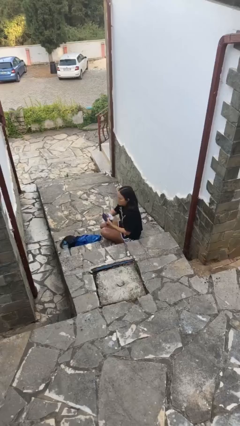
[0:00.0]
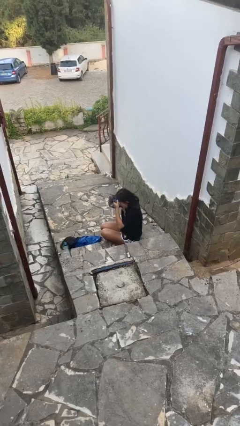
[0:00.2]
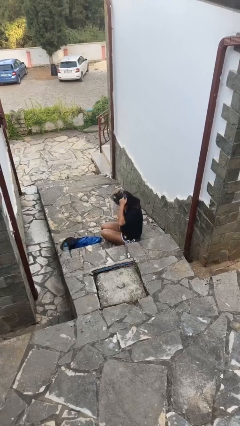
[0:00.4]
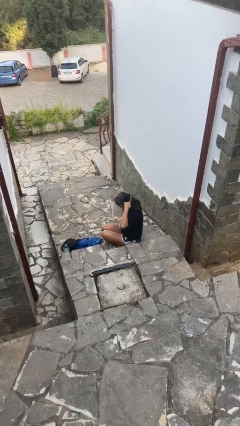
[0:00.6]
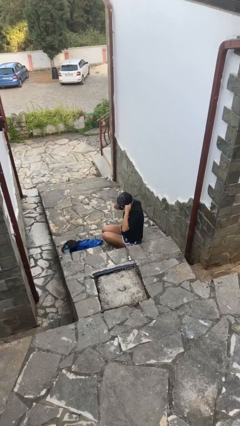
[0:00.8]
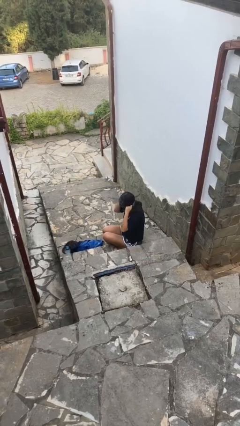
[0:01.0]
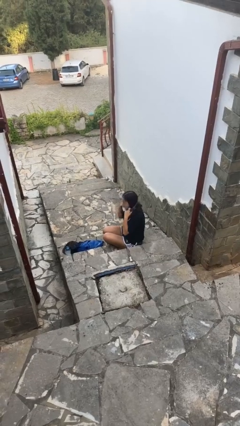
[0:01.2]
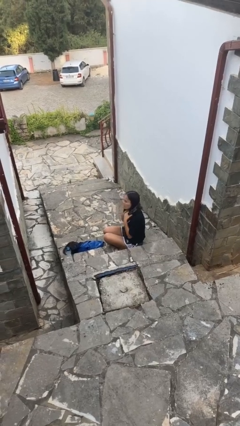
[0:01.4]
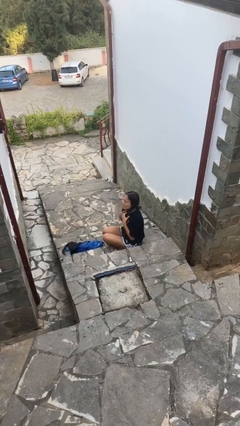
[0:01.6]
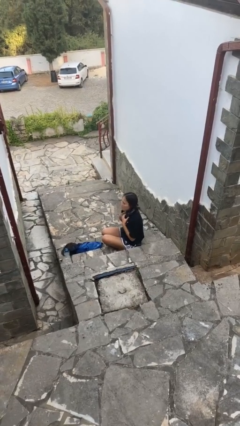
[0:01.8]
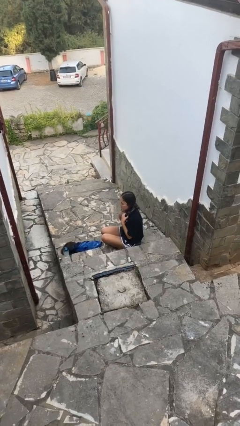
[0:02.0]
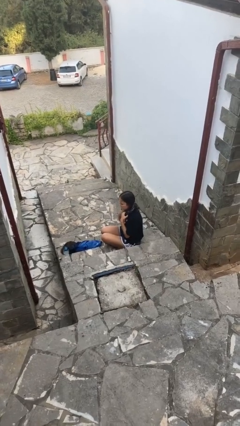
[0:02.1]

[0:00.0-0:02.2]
person puts on scarf

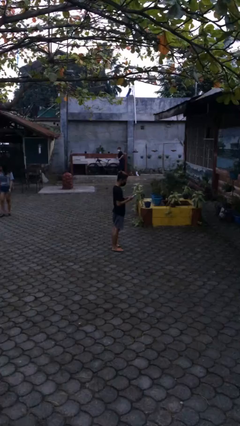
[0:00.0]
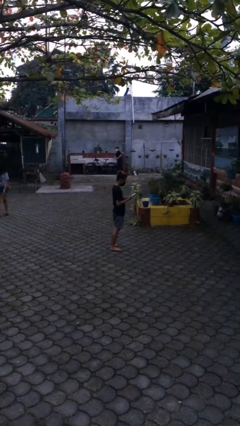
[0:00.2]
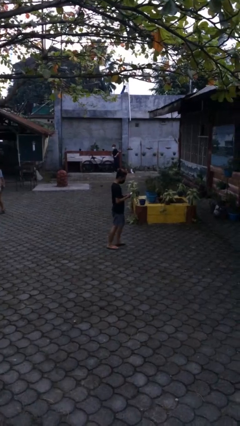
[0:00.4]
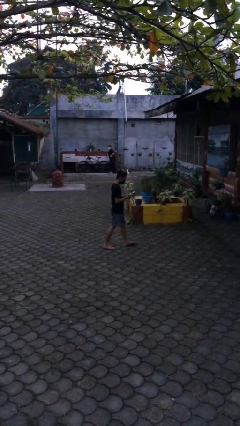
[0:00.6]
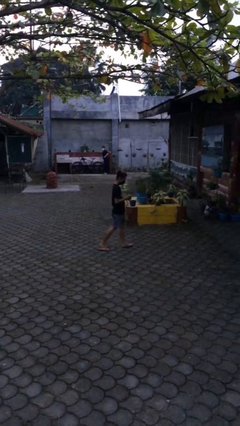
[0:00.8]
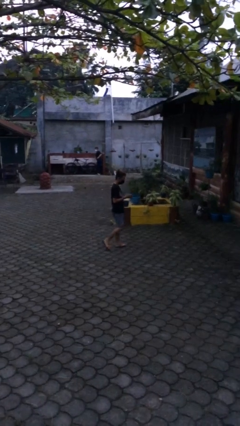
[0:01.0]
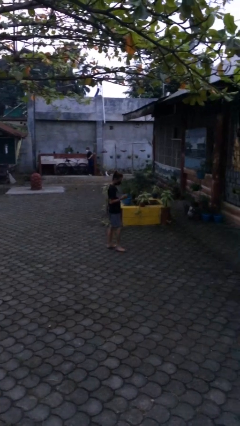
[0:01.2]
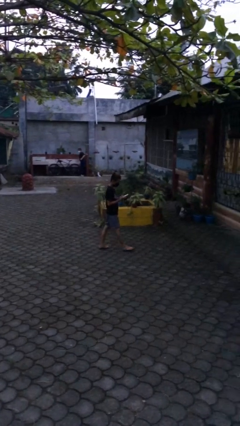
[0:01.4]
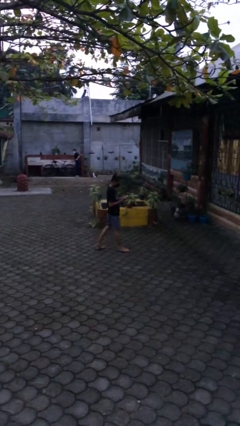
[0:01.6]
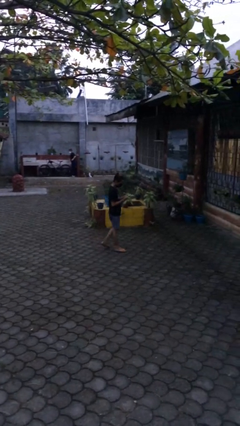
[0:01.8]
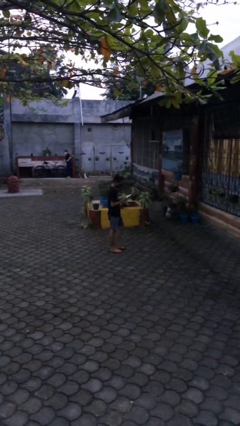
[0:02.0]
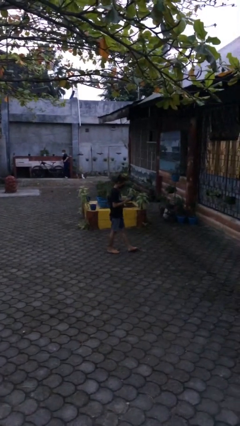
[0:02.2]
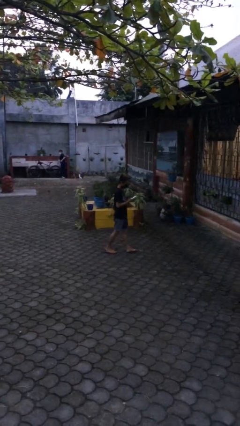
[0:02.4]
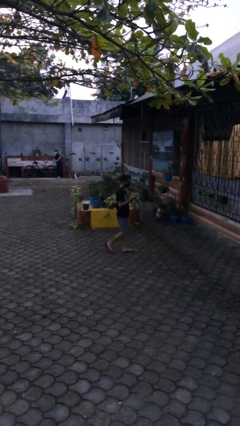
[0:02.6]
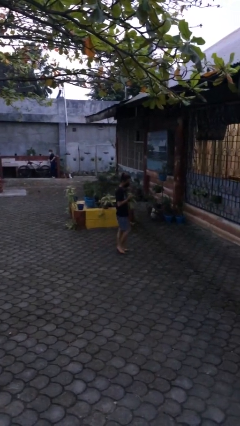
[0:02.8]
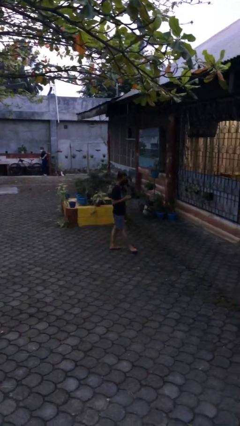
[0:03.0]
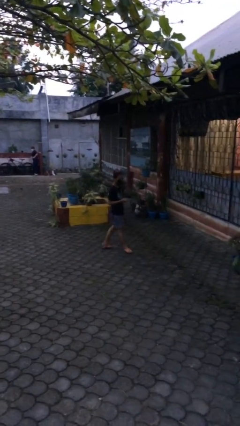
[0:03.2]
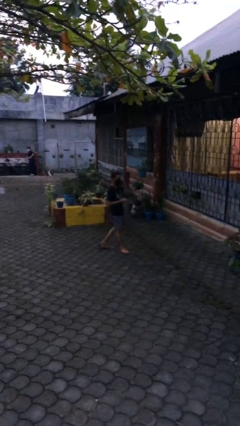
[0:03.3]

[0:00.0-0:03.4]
person texts on phone

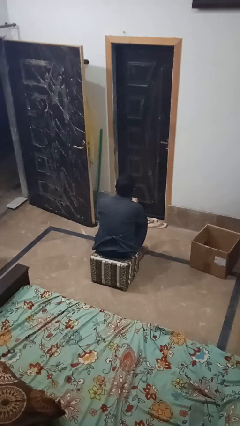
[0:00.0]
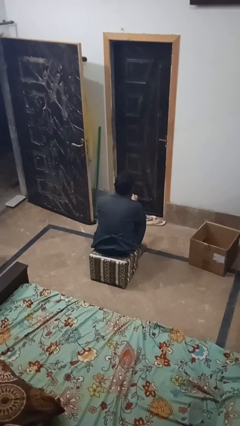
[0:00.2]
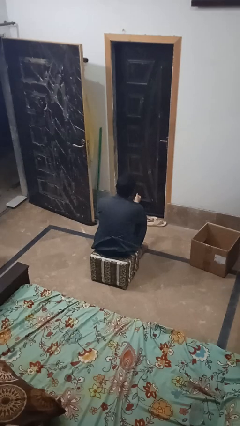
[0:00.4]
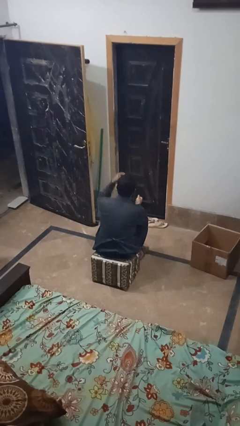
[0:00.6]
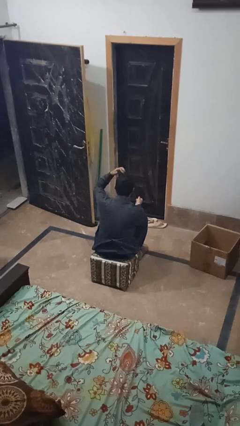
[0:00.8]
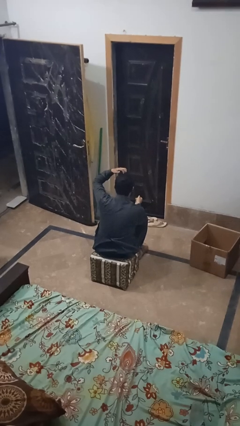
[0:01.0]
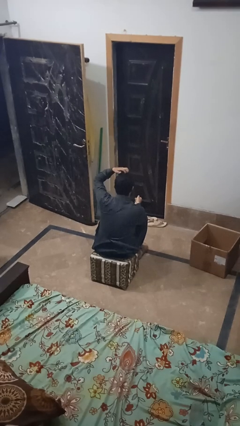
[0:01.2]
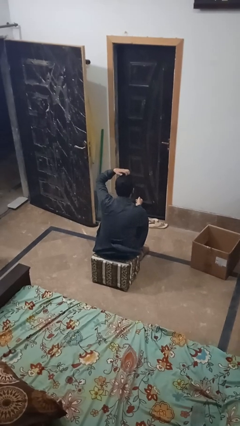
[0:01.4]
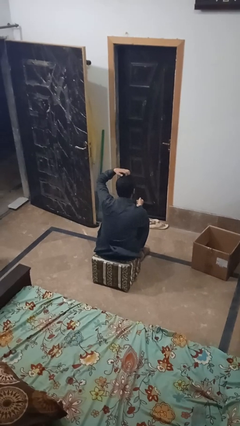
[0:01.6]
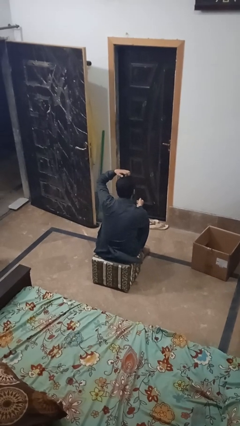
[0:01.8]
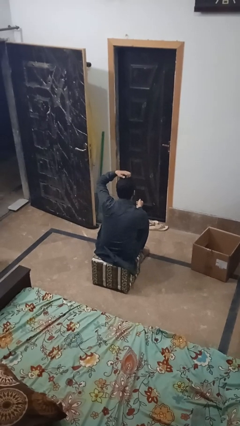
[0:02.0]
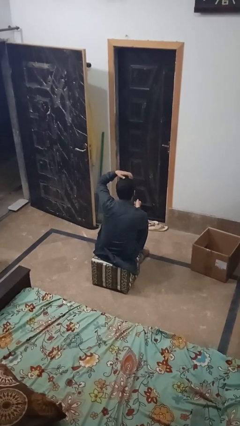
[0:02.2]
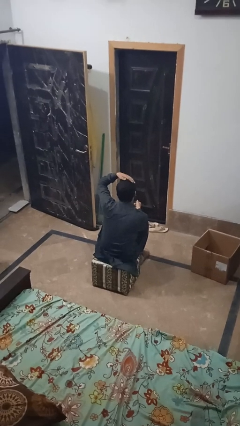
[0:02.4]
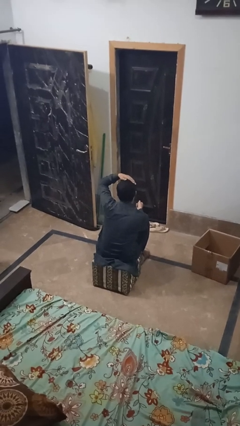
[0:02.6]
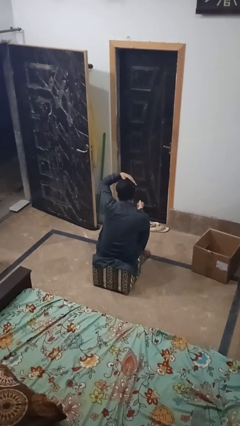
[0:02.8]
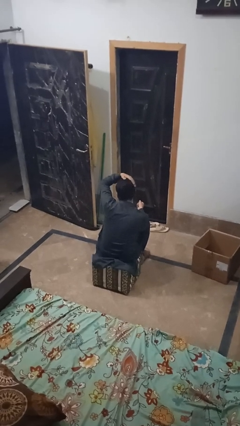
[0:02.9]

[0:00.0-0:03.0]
person strokes hair

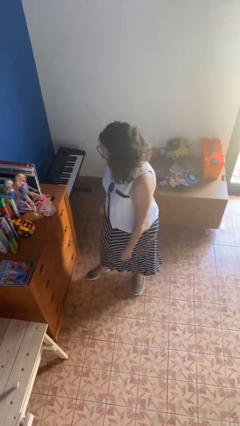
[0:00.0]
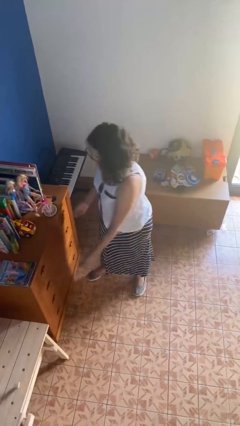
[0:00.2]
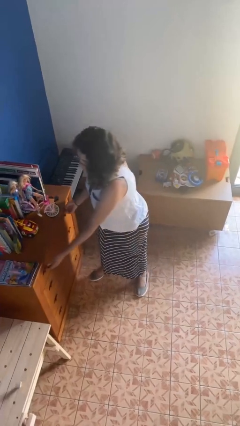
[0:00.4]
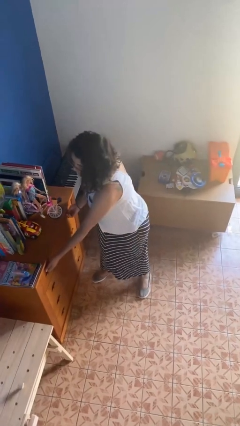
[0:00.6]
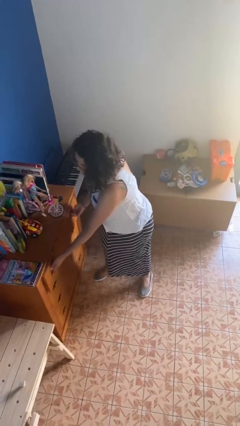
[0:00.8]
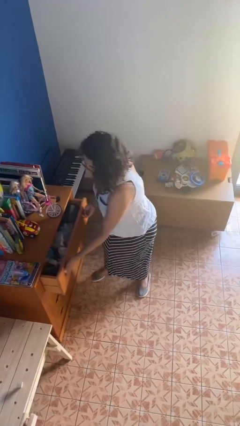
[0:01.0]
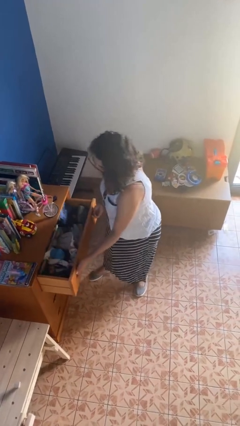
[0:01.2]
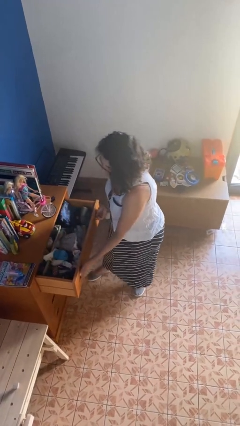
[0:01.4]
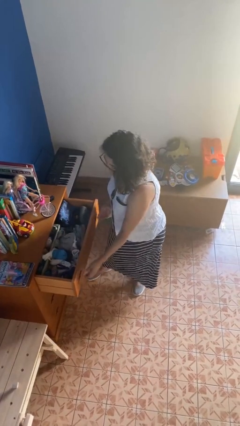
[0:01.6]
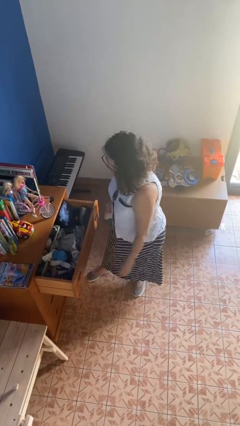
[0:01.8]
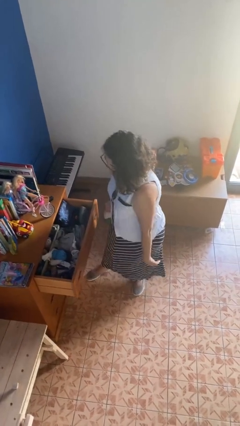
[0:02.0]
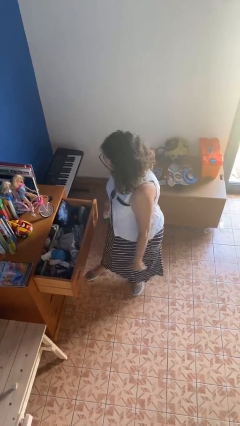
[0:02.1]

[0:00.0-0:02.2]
person opens dresser drawer

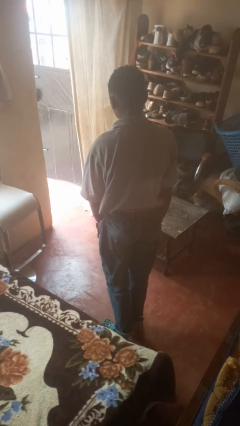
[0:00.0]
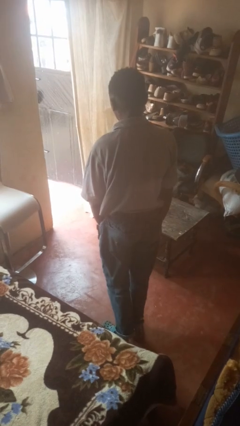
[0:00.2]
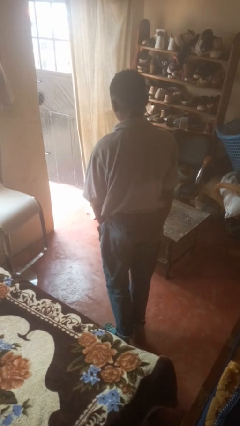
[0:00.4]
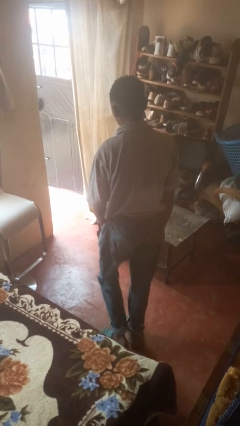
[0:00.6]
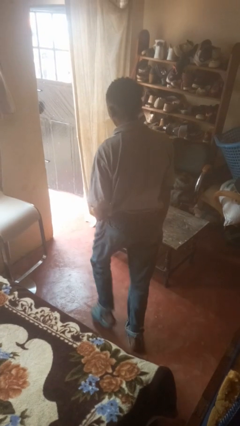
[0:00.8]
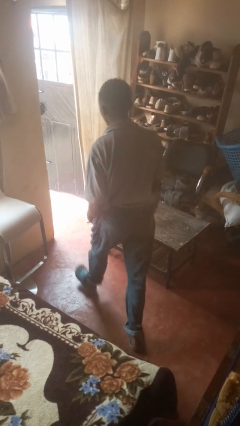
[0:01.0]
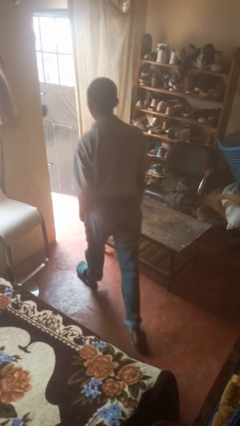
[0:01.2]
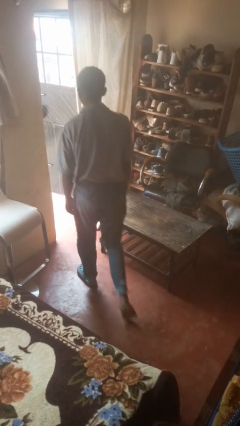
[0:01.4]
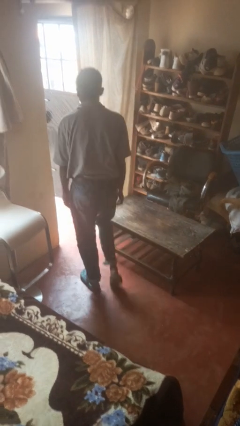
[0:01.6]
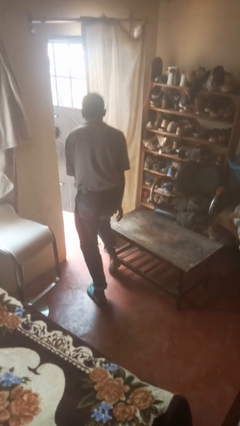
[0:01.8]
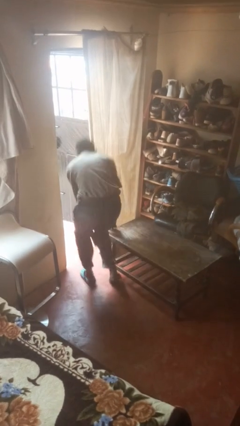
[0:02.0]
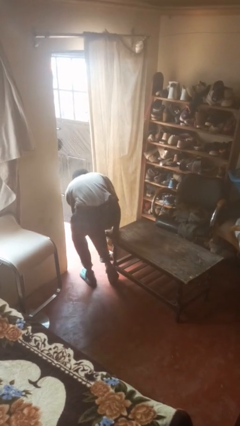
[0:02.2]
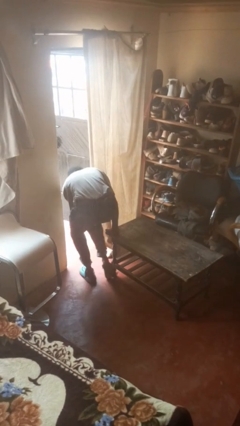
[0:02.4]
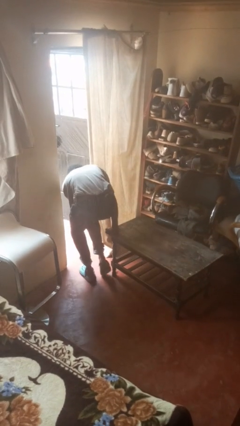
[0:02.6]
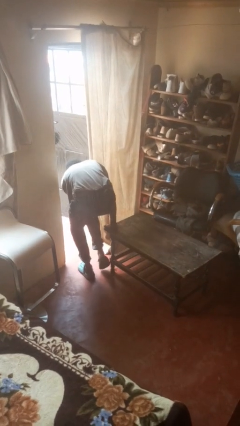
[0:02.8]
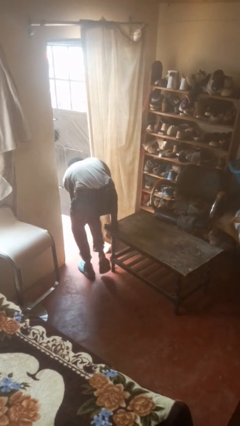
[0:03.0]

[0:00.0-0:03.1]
person bumps into table

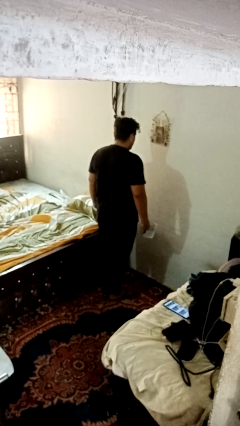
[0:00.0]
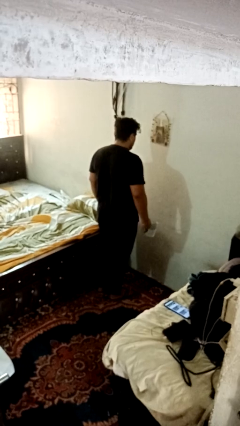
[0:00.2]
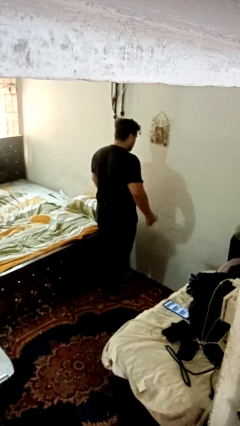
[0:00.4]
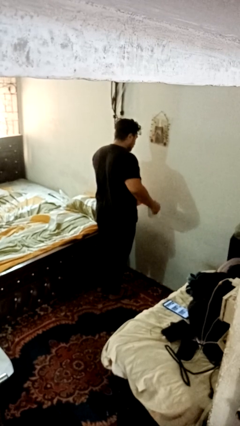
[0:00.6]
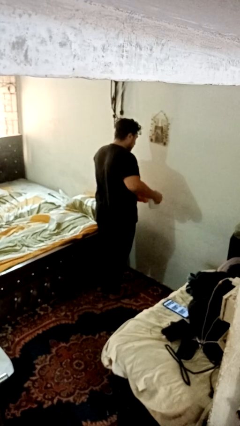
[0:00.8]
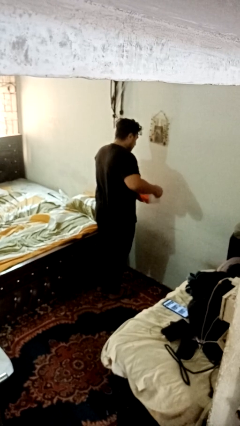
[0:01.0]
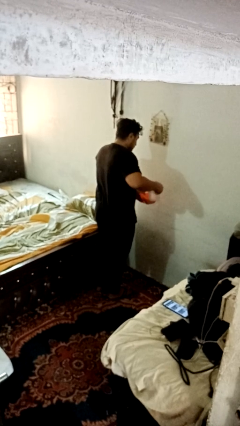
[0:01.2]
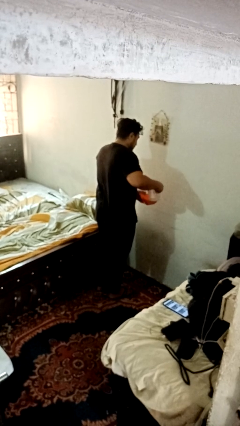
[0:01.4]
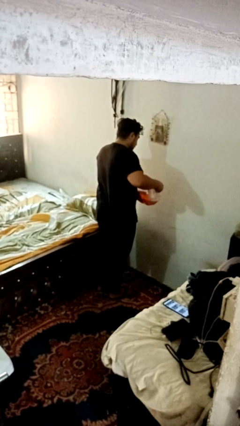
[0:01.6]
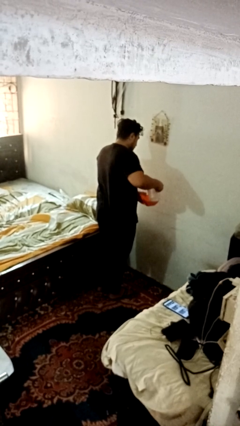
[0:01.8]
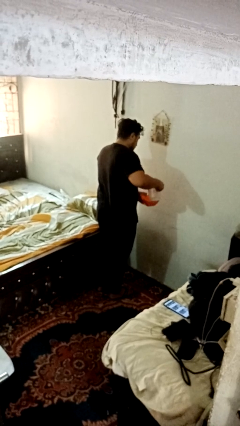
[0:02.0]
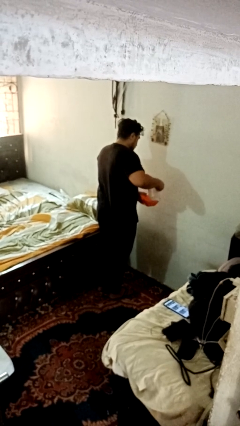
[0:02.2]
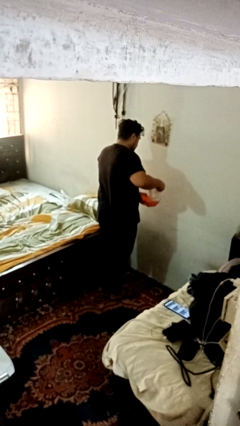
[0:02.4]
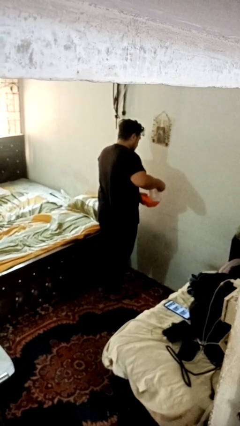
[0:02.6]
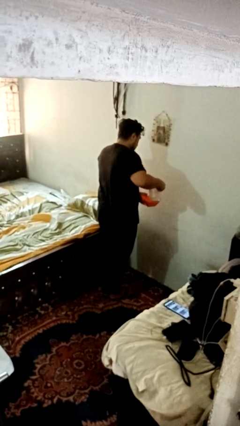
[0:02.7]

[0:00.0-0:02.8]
person pours into bowl

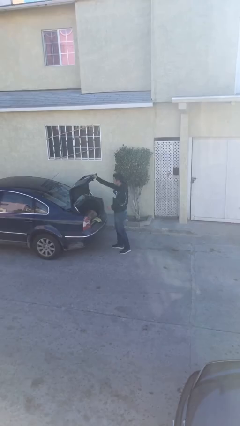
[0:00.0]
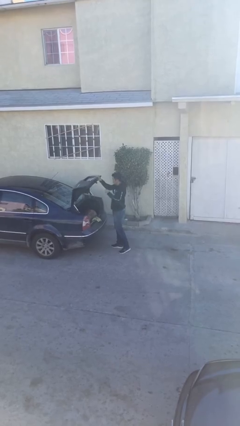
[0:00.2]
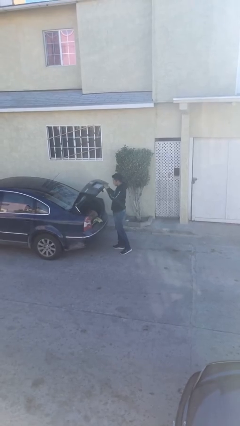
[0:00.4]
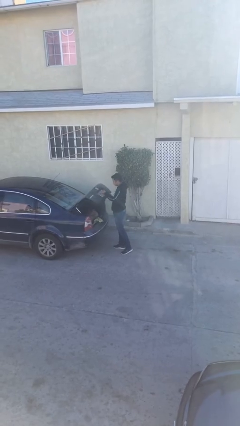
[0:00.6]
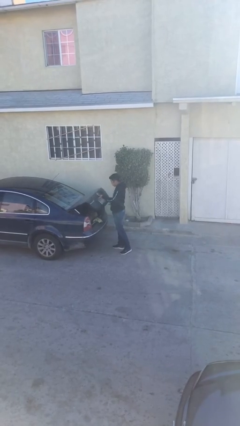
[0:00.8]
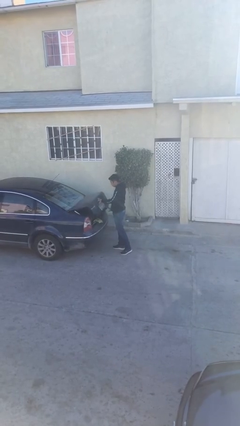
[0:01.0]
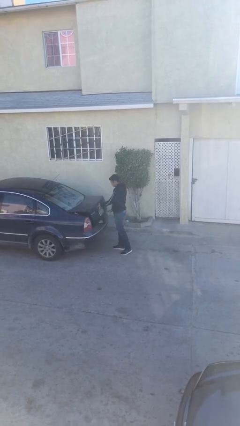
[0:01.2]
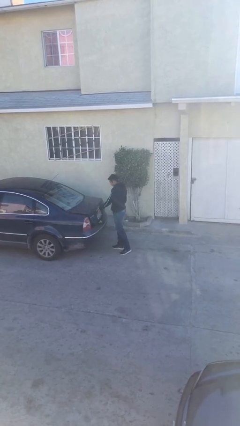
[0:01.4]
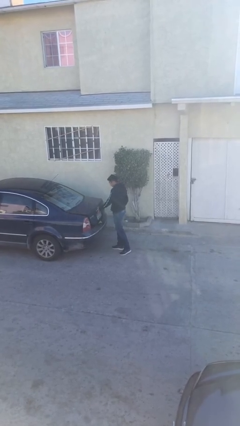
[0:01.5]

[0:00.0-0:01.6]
person closes car trunk
